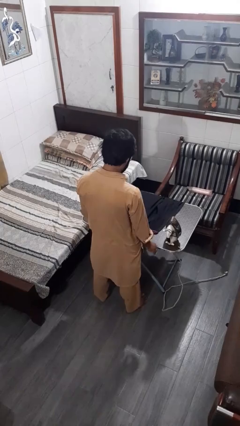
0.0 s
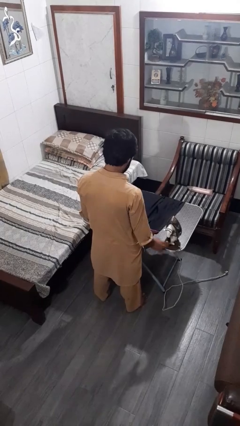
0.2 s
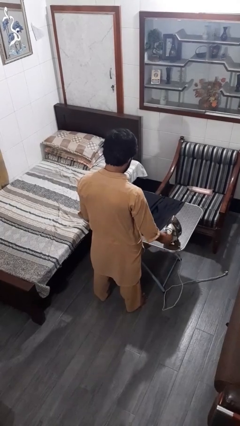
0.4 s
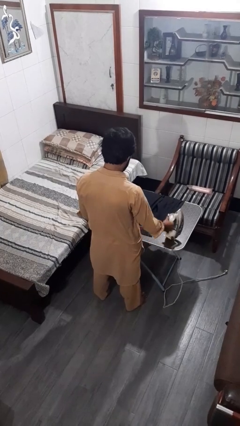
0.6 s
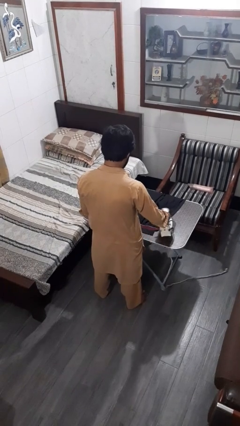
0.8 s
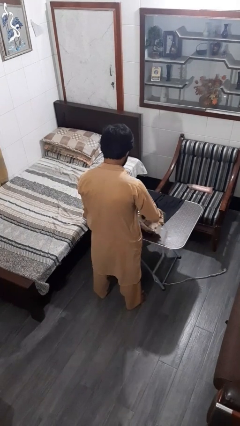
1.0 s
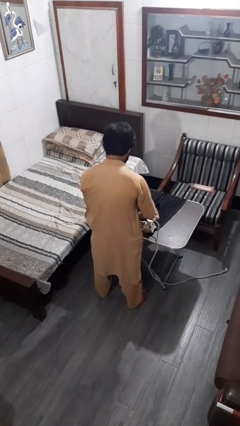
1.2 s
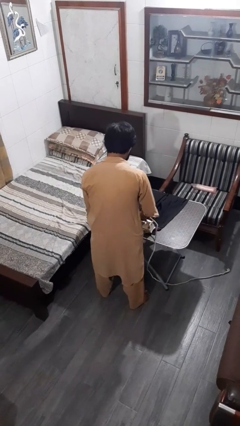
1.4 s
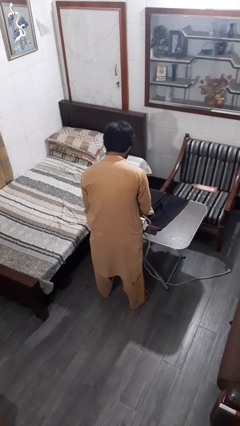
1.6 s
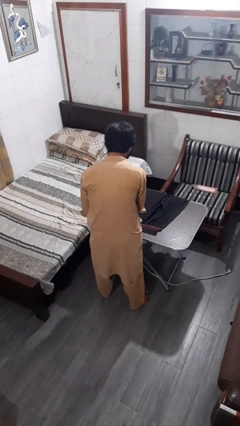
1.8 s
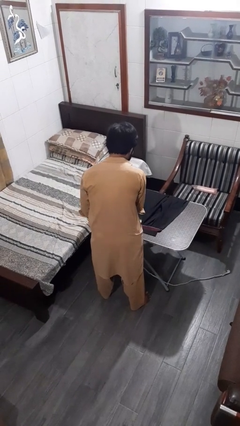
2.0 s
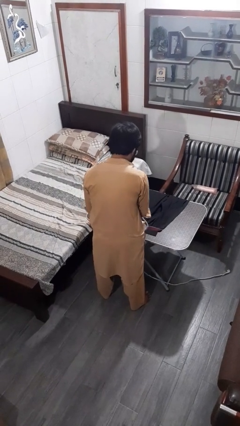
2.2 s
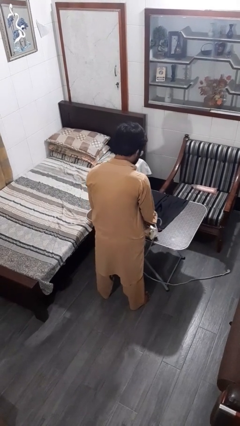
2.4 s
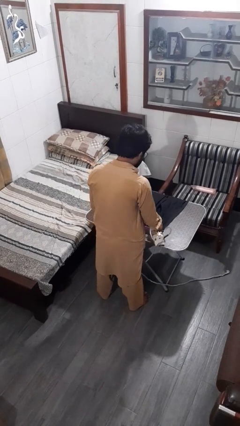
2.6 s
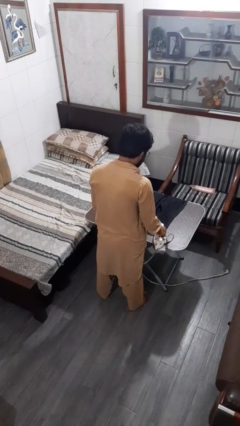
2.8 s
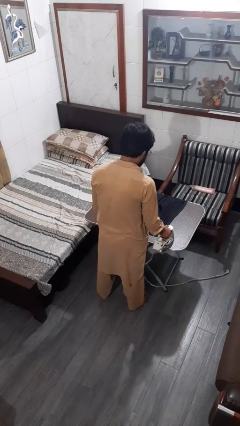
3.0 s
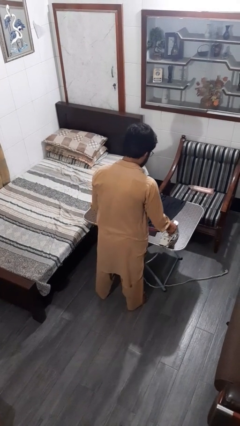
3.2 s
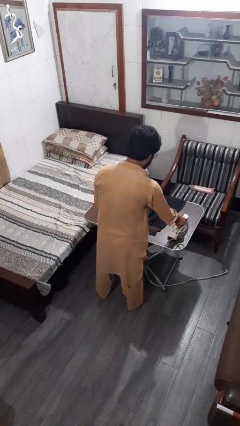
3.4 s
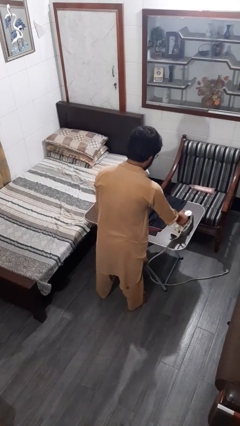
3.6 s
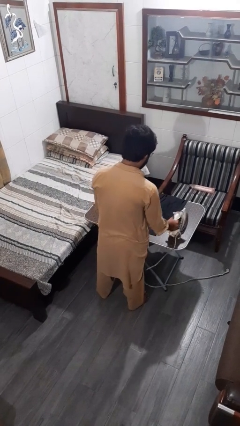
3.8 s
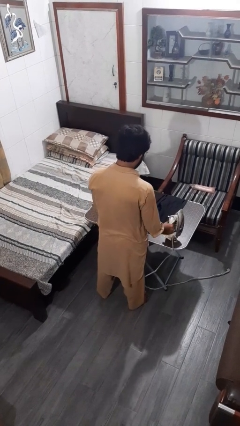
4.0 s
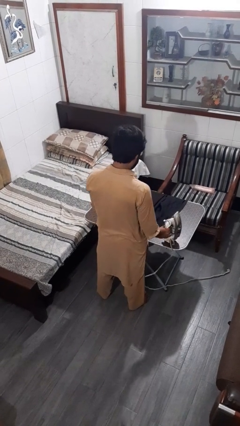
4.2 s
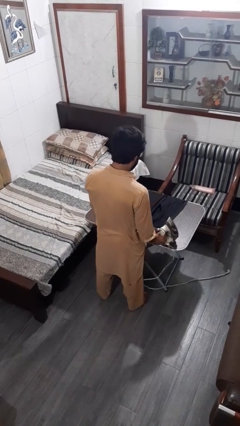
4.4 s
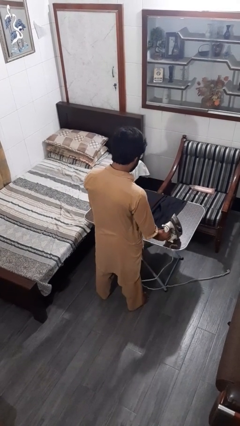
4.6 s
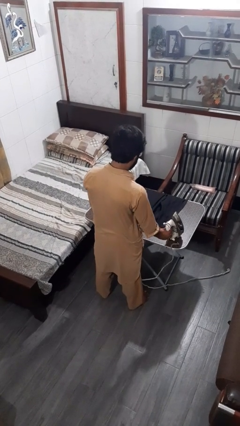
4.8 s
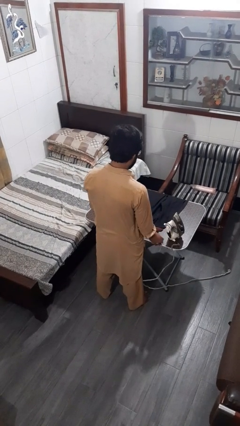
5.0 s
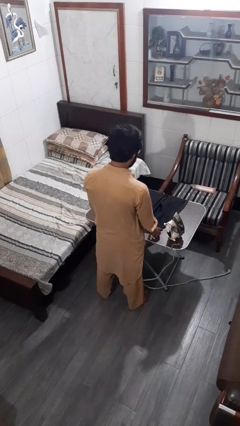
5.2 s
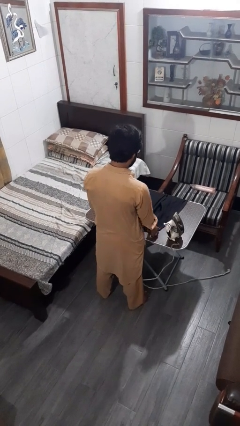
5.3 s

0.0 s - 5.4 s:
person irons clothes

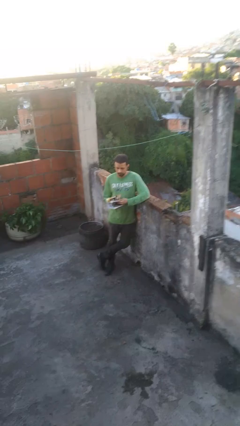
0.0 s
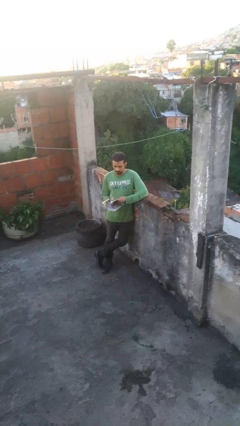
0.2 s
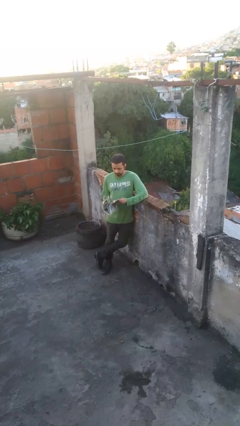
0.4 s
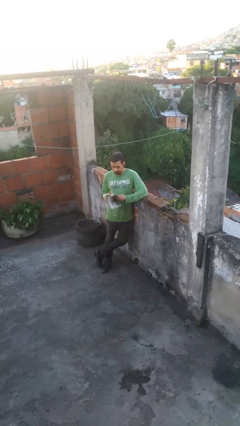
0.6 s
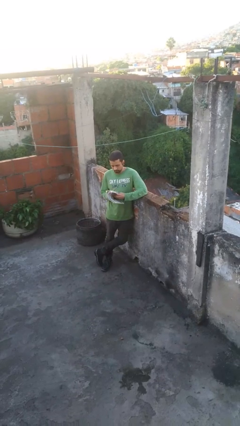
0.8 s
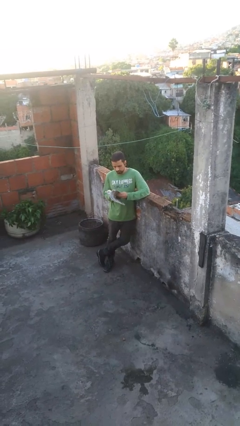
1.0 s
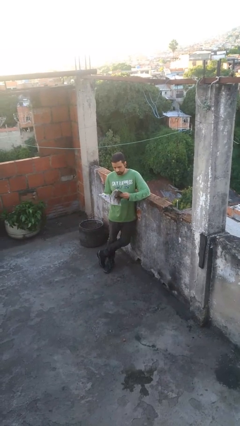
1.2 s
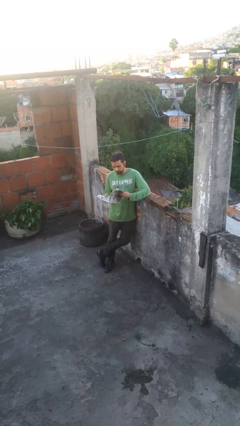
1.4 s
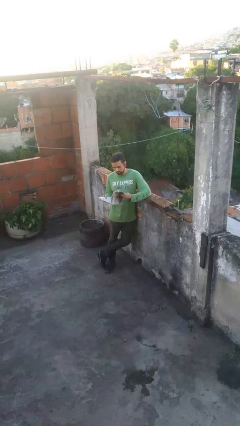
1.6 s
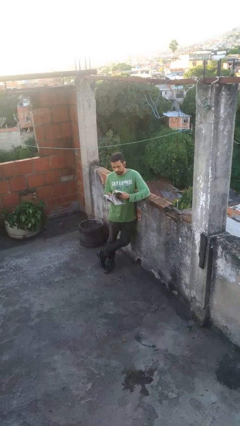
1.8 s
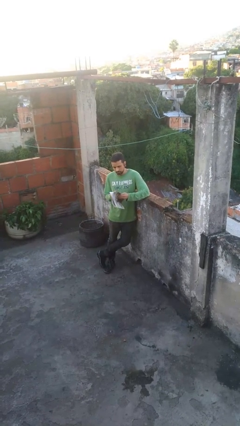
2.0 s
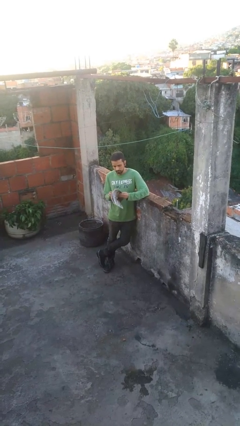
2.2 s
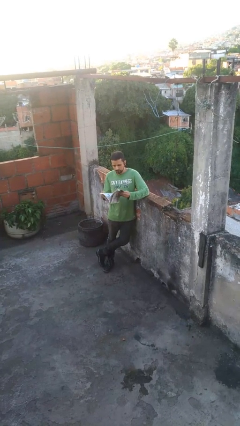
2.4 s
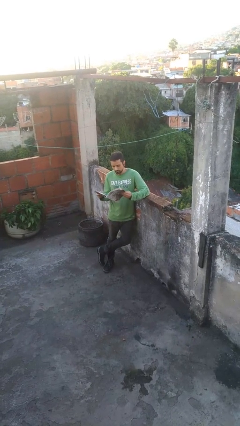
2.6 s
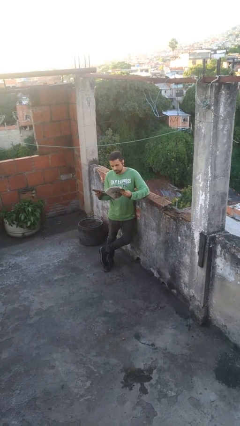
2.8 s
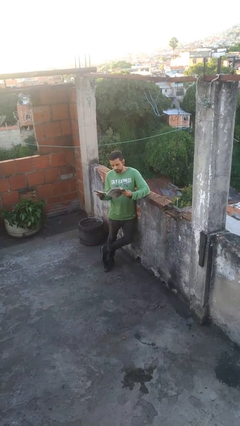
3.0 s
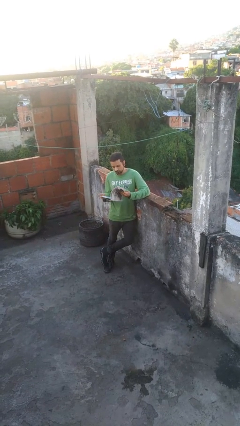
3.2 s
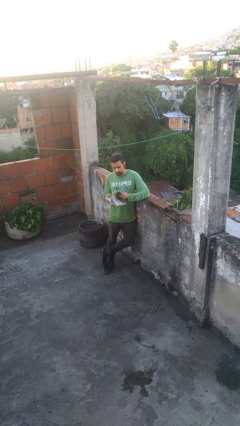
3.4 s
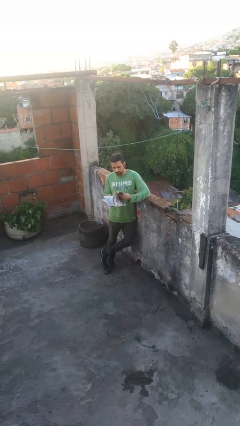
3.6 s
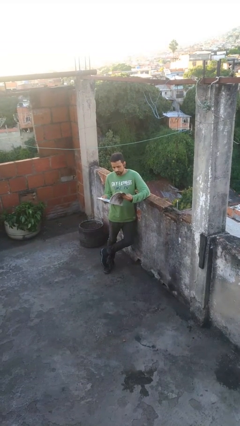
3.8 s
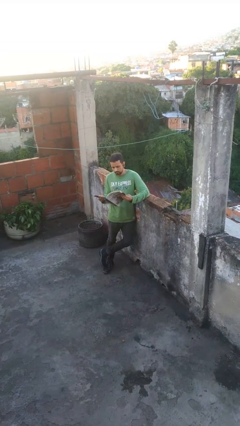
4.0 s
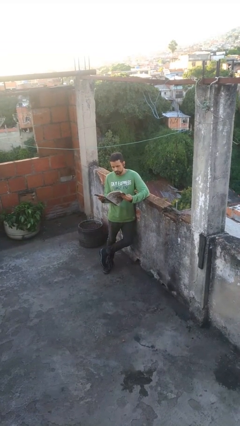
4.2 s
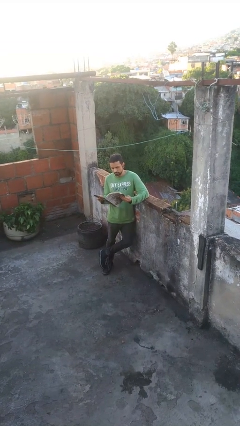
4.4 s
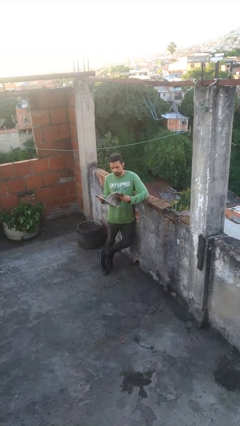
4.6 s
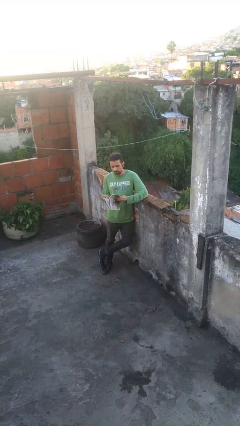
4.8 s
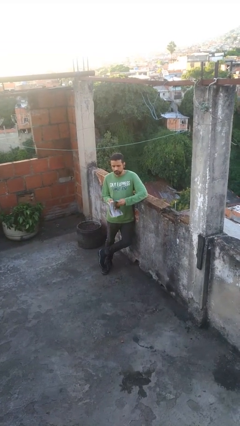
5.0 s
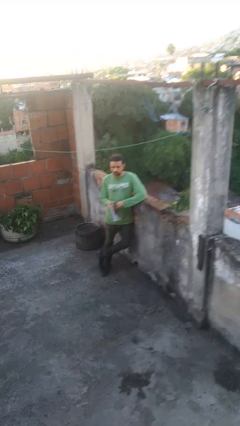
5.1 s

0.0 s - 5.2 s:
person reads magazine

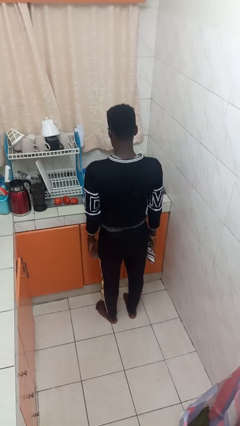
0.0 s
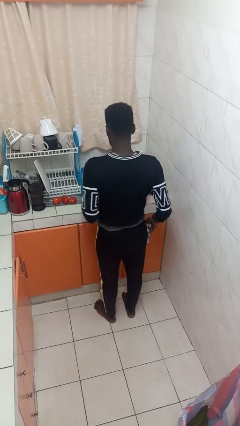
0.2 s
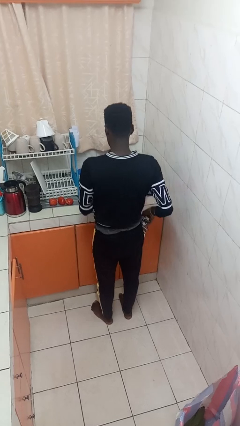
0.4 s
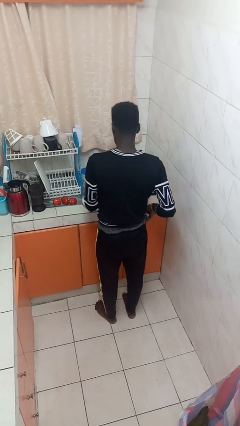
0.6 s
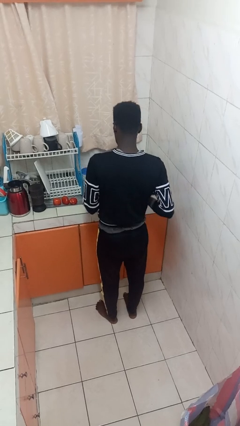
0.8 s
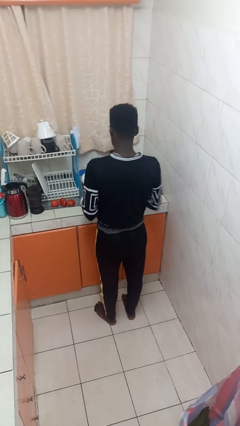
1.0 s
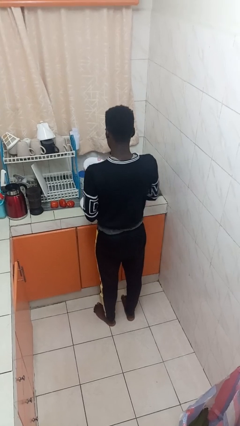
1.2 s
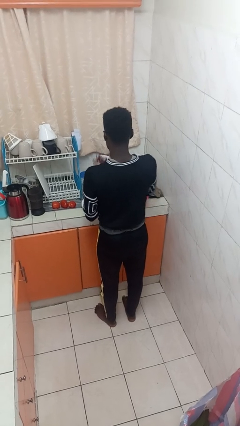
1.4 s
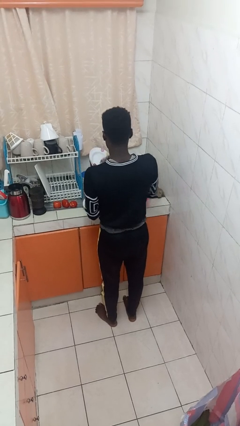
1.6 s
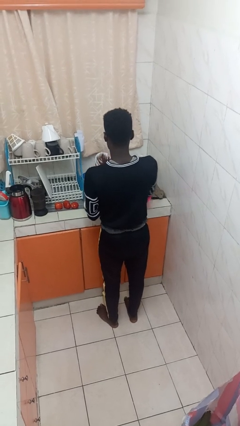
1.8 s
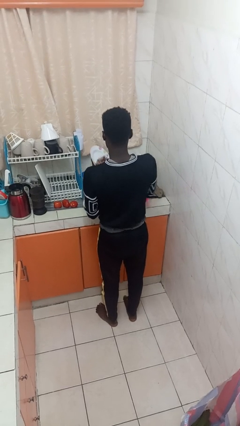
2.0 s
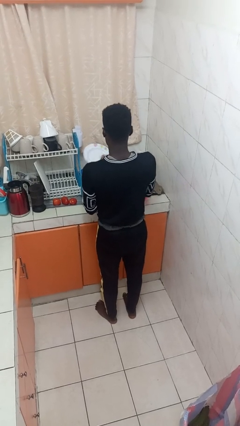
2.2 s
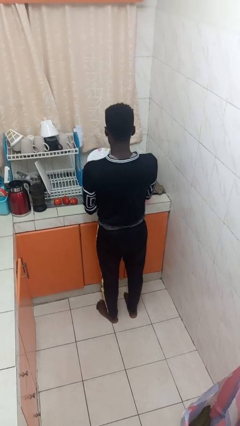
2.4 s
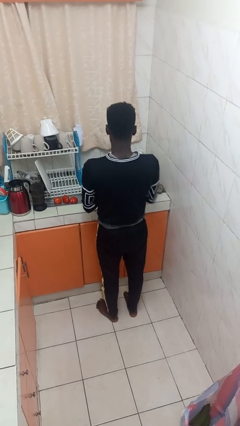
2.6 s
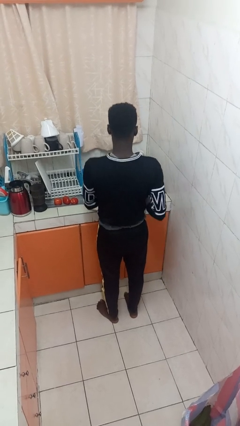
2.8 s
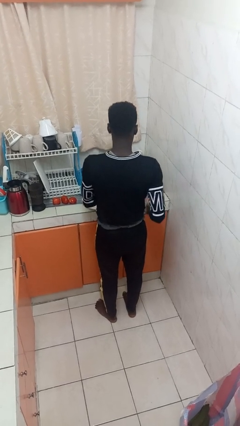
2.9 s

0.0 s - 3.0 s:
person dries dish

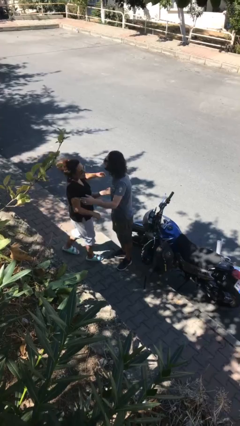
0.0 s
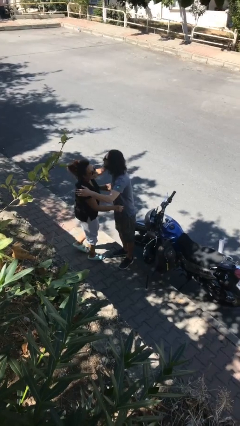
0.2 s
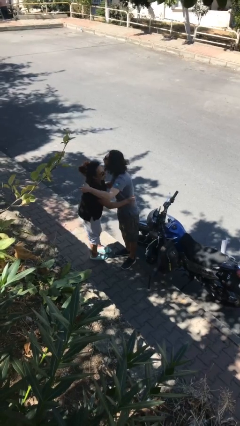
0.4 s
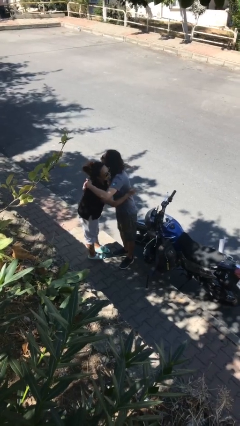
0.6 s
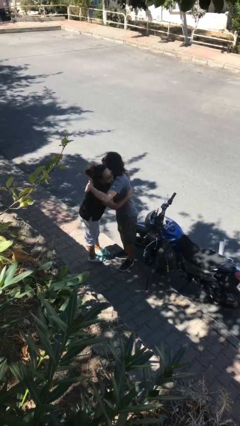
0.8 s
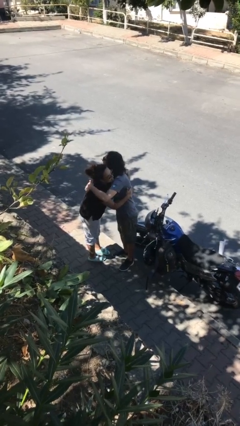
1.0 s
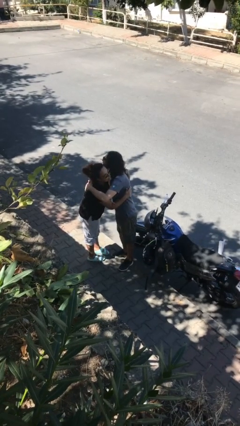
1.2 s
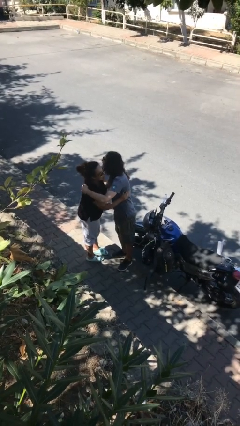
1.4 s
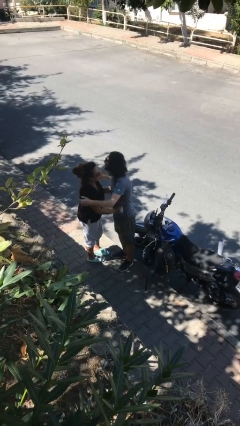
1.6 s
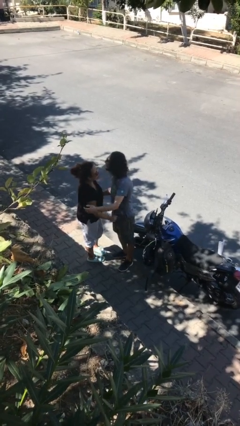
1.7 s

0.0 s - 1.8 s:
person embraces person

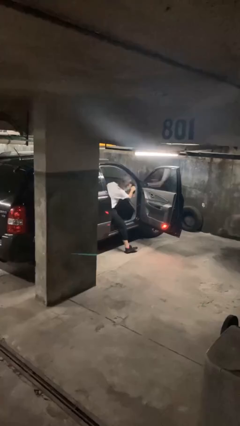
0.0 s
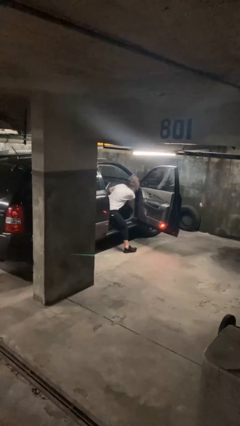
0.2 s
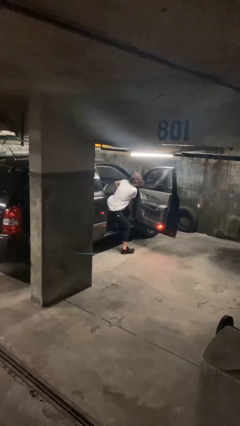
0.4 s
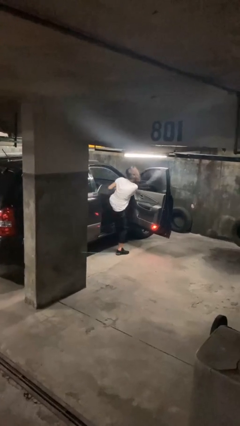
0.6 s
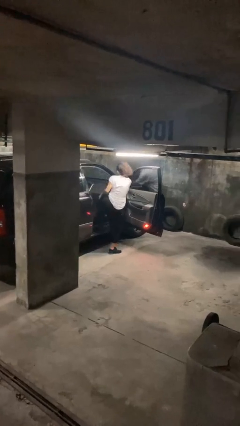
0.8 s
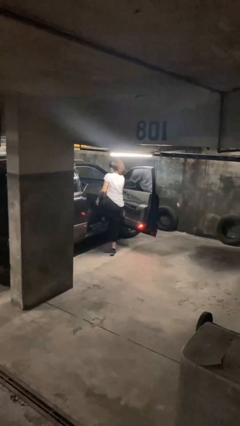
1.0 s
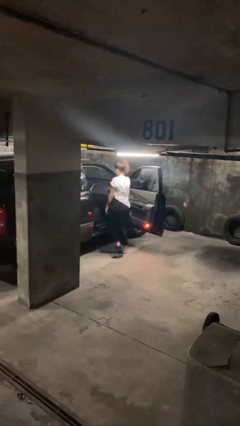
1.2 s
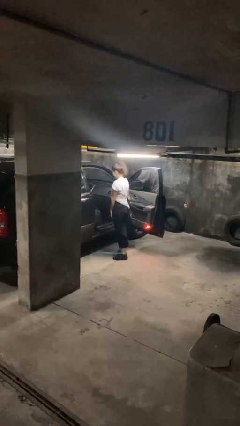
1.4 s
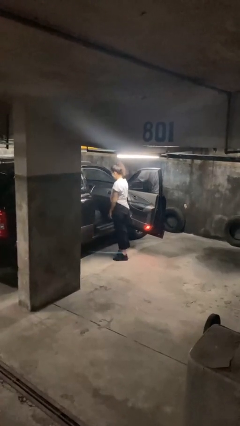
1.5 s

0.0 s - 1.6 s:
person exits car

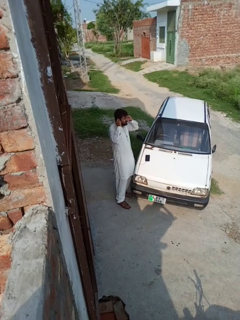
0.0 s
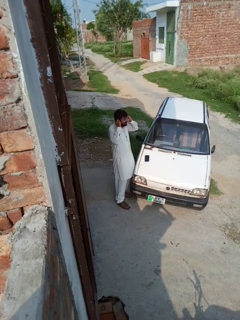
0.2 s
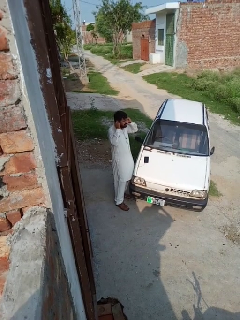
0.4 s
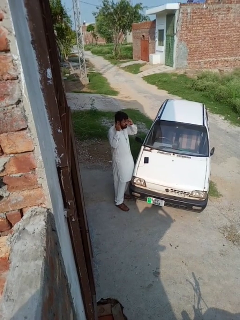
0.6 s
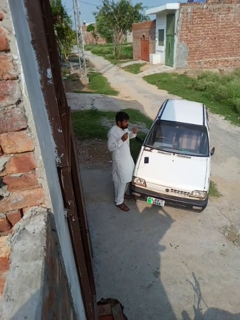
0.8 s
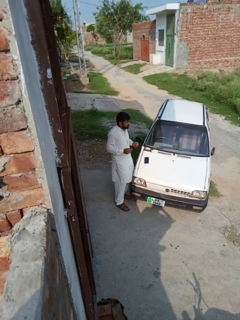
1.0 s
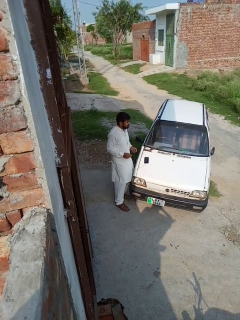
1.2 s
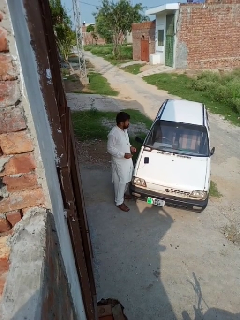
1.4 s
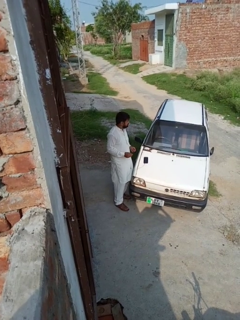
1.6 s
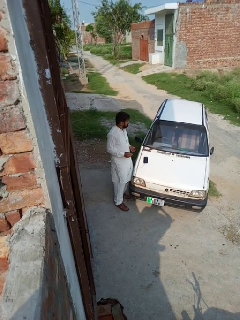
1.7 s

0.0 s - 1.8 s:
person takes off headphones
